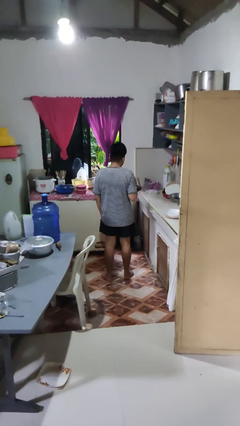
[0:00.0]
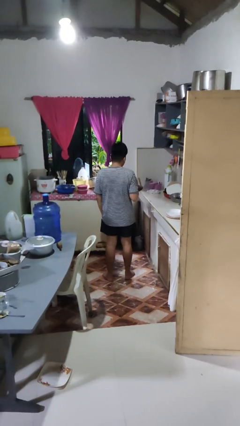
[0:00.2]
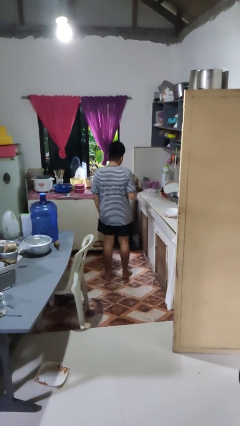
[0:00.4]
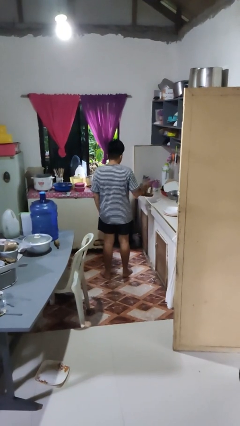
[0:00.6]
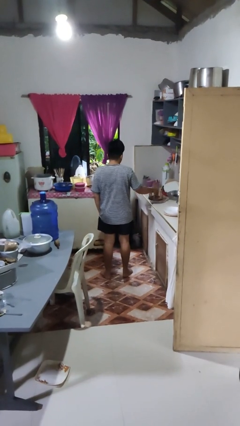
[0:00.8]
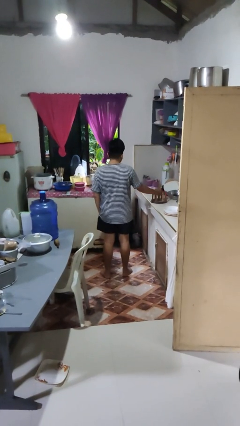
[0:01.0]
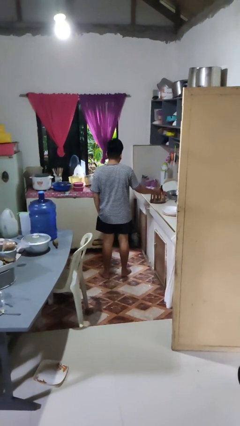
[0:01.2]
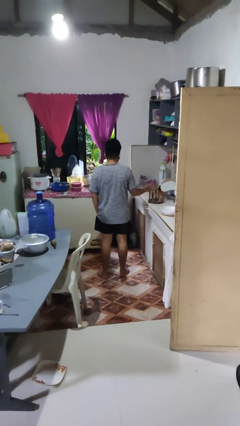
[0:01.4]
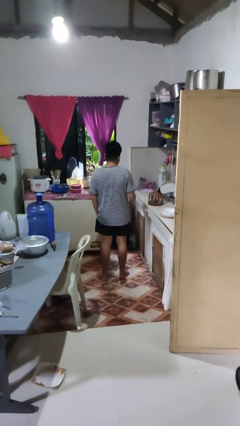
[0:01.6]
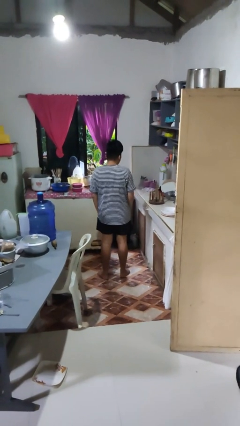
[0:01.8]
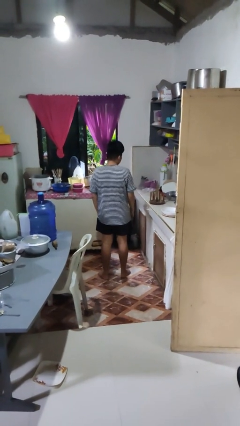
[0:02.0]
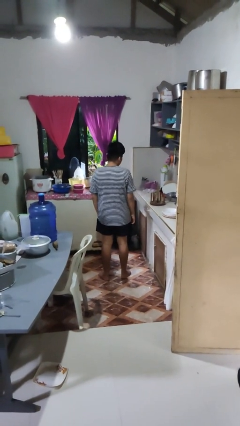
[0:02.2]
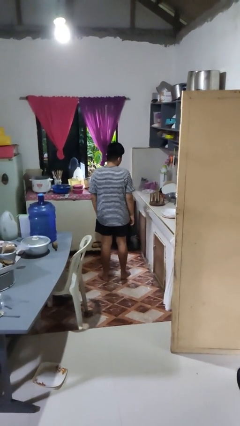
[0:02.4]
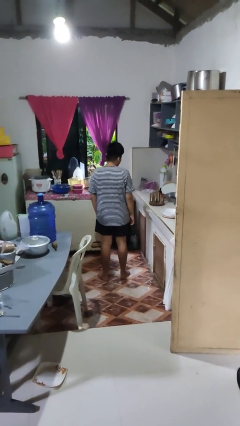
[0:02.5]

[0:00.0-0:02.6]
person puts down object on countertop

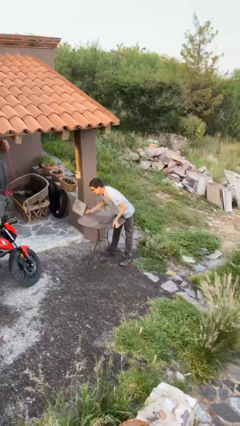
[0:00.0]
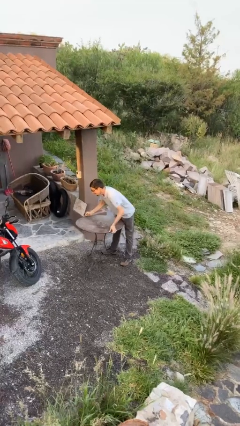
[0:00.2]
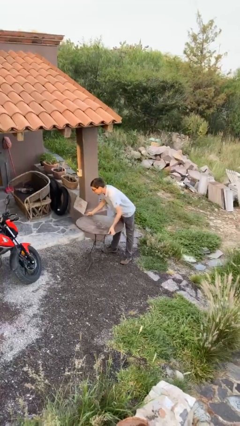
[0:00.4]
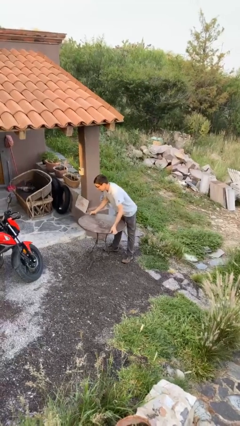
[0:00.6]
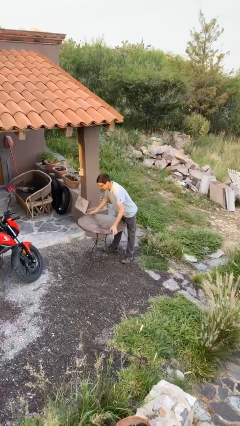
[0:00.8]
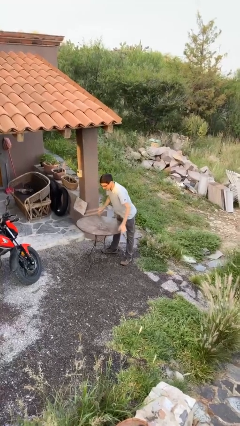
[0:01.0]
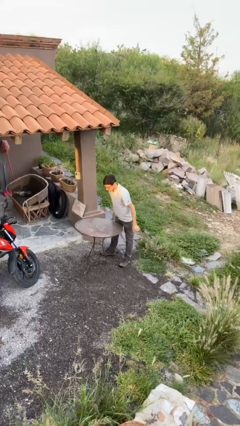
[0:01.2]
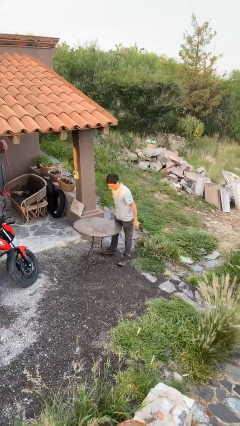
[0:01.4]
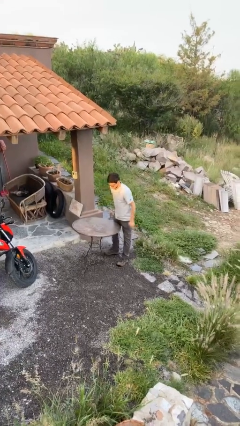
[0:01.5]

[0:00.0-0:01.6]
person puts down object on floor

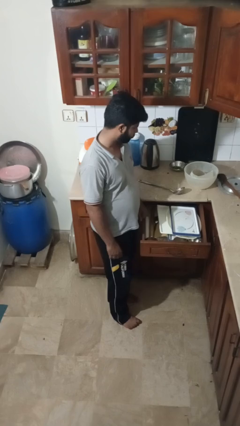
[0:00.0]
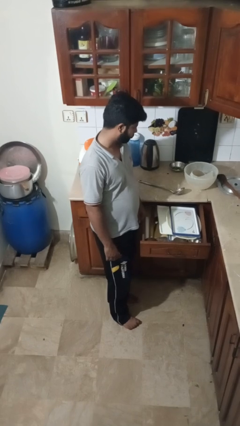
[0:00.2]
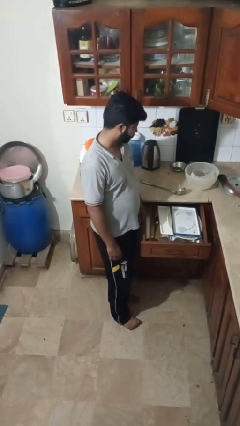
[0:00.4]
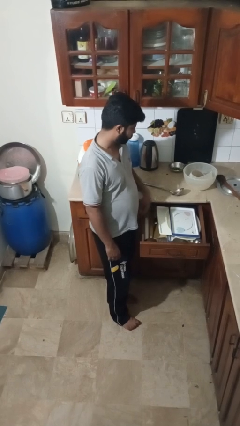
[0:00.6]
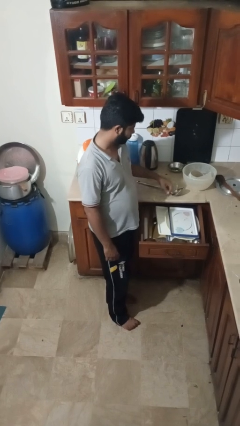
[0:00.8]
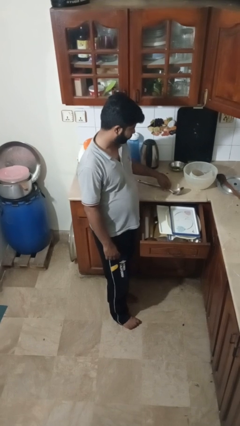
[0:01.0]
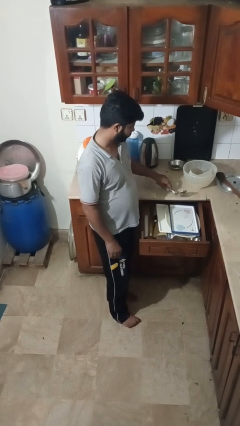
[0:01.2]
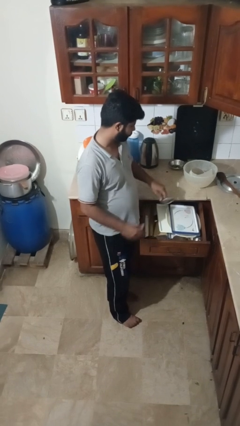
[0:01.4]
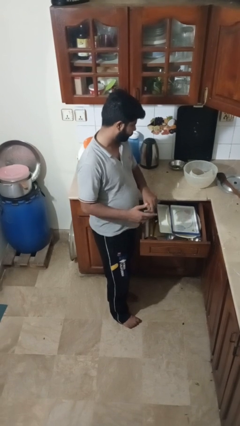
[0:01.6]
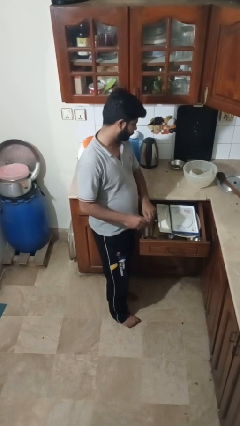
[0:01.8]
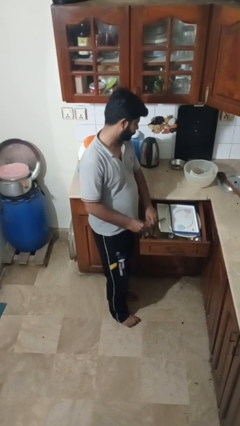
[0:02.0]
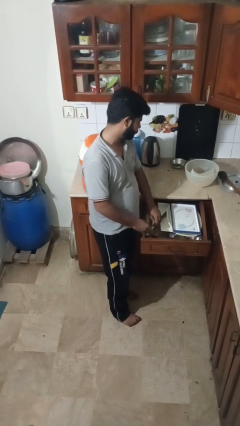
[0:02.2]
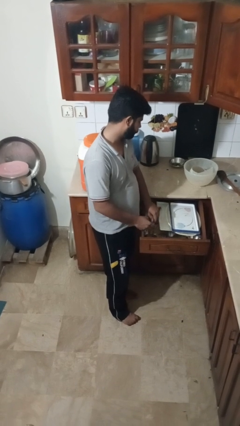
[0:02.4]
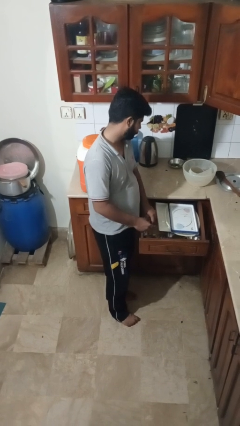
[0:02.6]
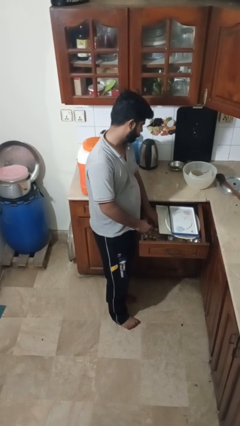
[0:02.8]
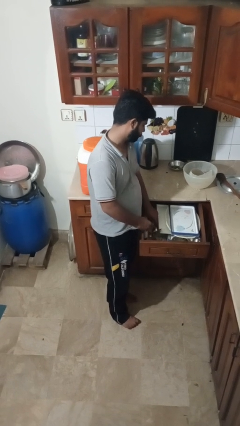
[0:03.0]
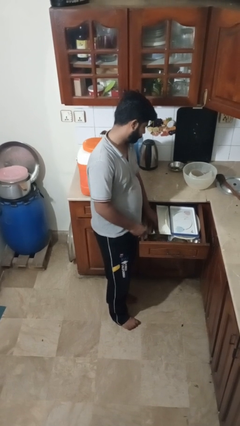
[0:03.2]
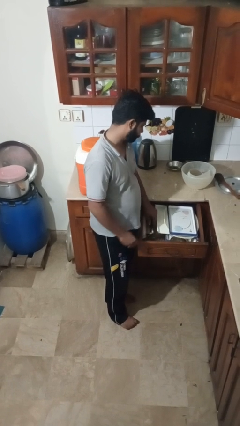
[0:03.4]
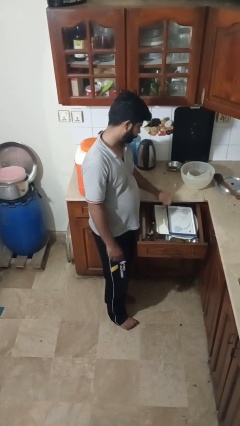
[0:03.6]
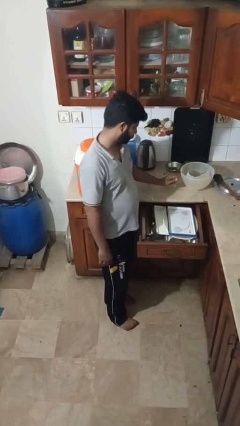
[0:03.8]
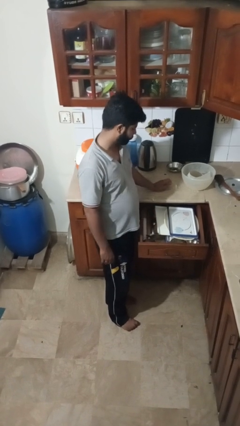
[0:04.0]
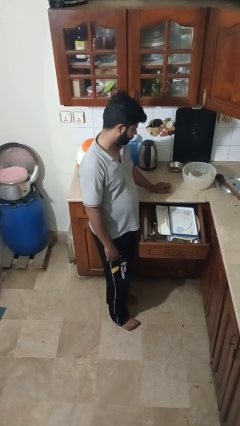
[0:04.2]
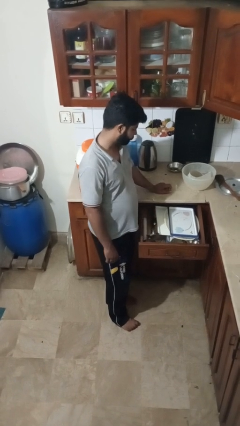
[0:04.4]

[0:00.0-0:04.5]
person puts object into kitchen drawer

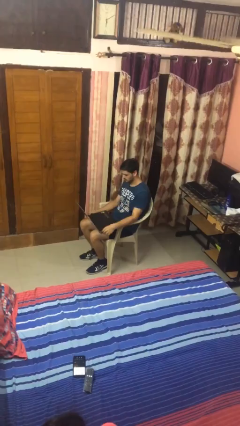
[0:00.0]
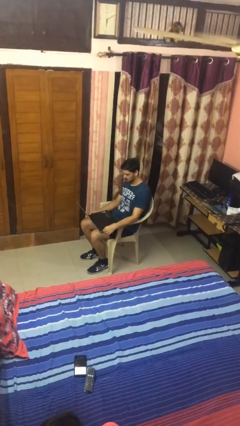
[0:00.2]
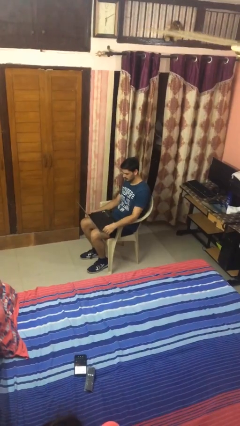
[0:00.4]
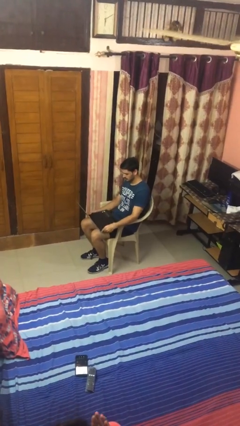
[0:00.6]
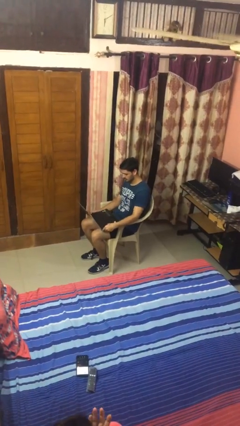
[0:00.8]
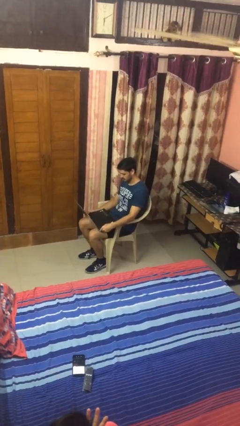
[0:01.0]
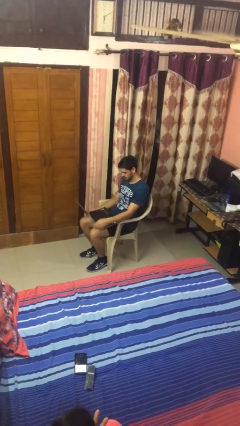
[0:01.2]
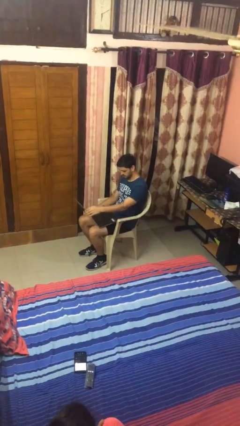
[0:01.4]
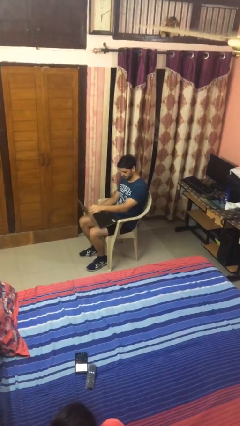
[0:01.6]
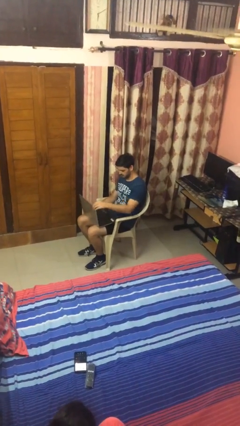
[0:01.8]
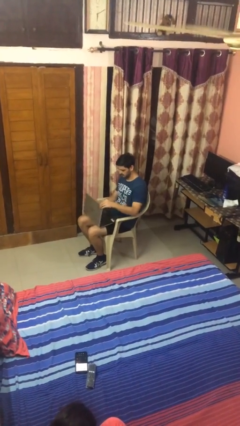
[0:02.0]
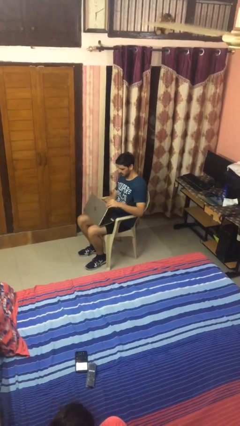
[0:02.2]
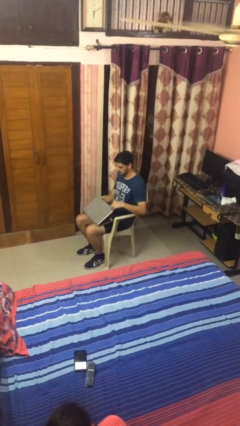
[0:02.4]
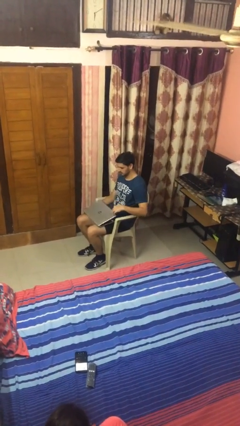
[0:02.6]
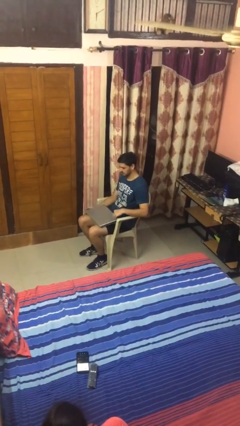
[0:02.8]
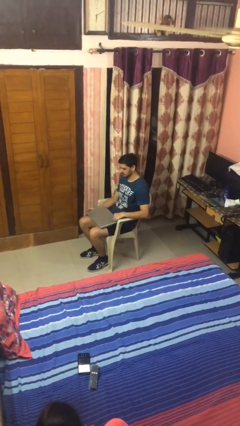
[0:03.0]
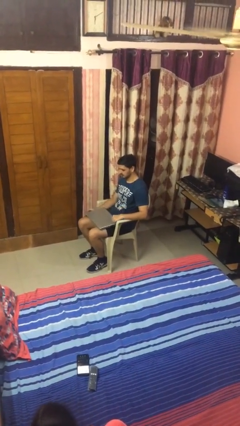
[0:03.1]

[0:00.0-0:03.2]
person closes laptop

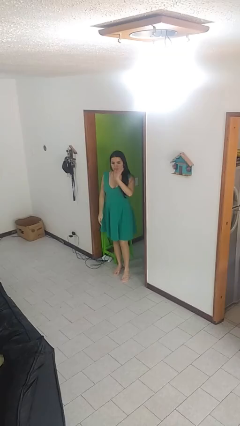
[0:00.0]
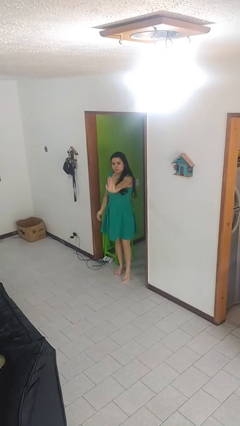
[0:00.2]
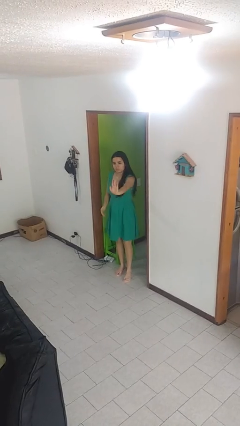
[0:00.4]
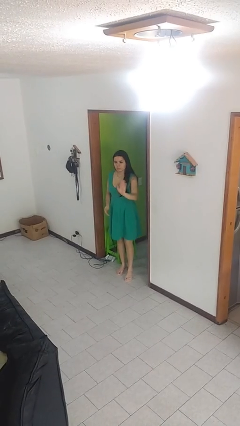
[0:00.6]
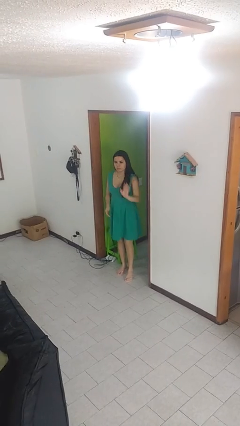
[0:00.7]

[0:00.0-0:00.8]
person gestures stop

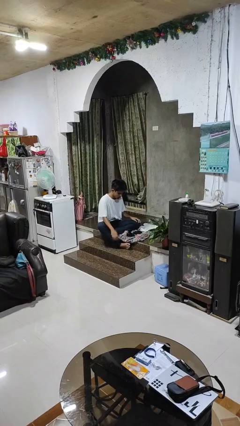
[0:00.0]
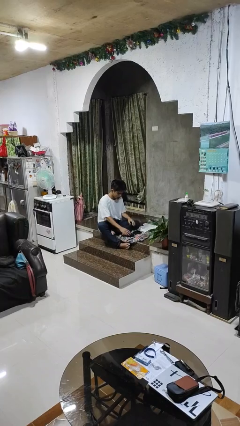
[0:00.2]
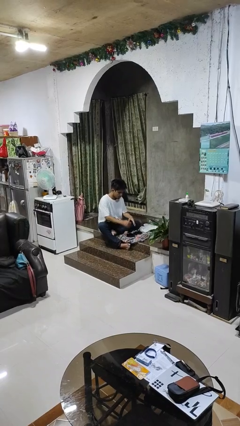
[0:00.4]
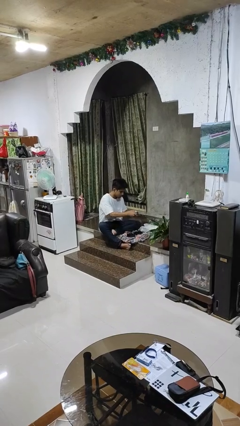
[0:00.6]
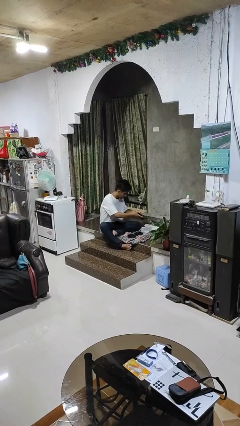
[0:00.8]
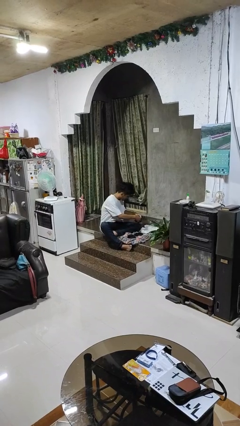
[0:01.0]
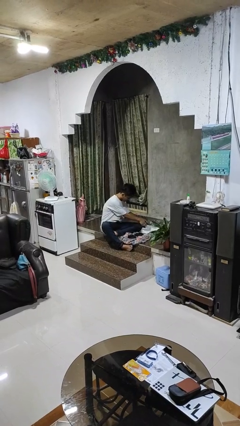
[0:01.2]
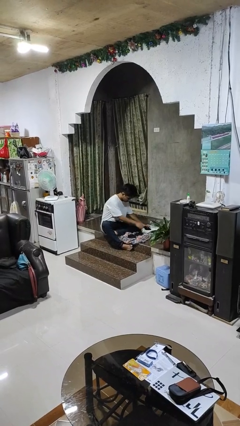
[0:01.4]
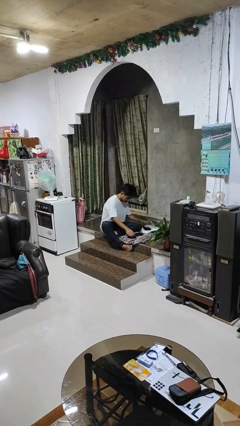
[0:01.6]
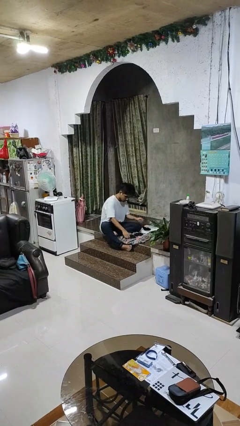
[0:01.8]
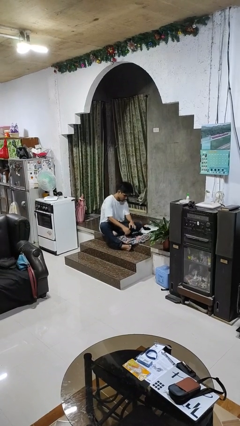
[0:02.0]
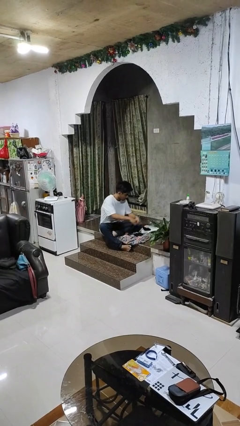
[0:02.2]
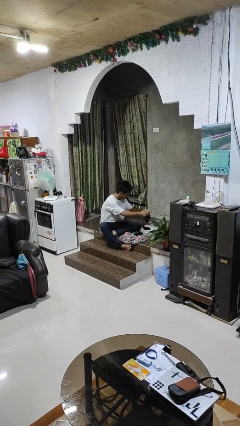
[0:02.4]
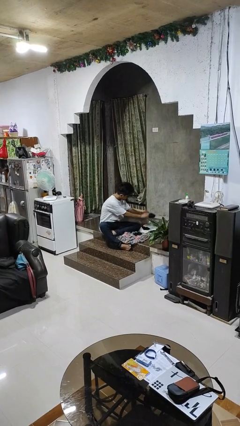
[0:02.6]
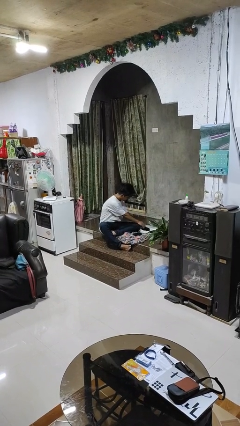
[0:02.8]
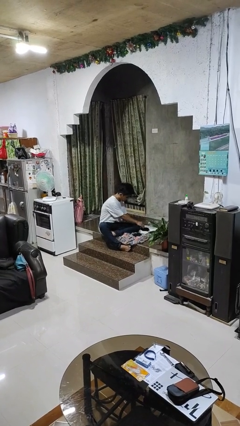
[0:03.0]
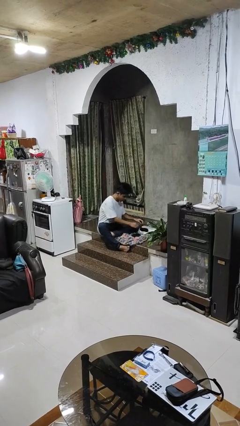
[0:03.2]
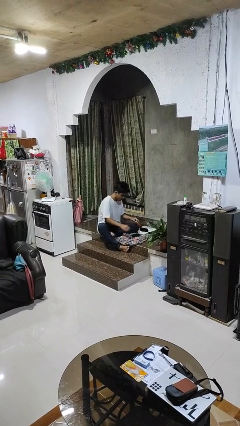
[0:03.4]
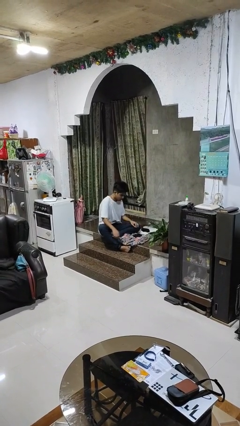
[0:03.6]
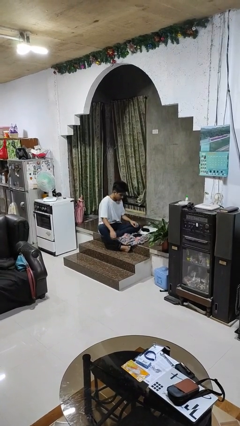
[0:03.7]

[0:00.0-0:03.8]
person folds socks

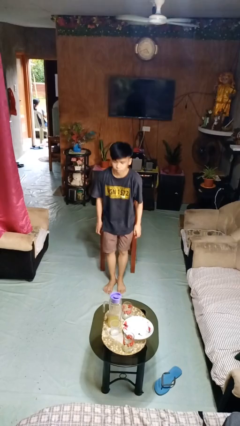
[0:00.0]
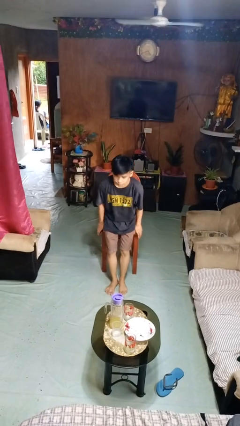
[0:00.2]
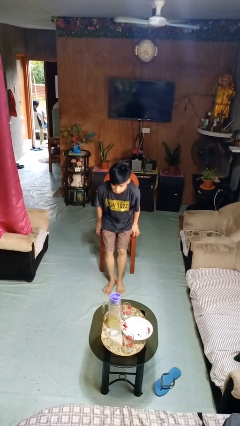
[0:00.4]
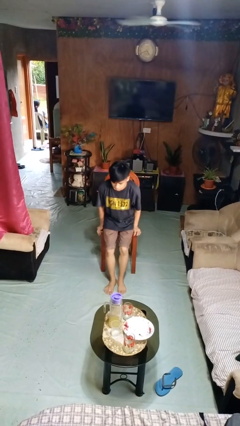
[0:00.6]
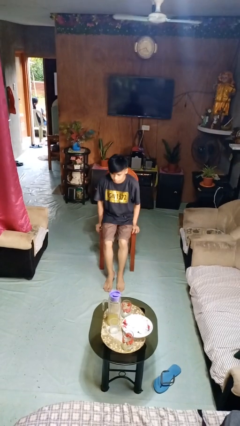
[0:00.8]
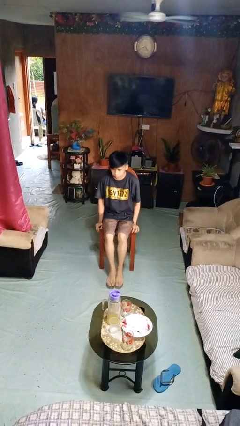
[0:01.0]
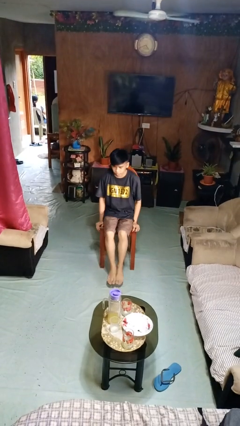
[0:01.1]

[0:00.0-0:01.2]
person sits down
